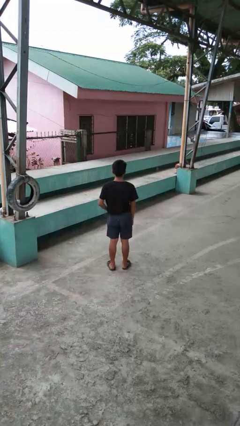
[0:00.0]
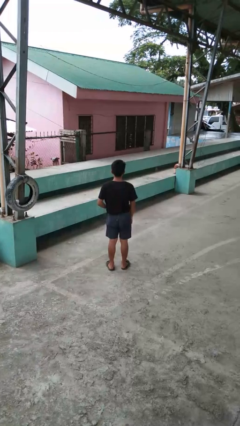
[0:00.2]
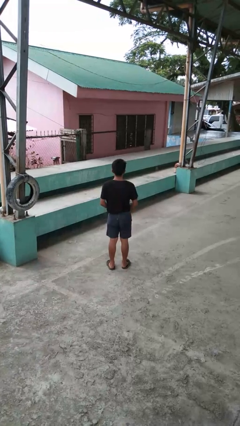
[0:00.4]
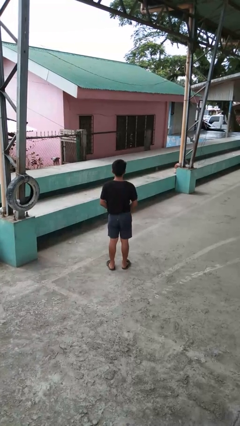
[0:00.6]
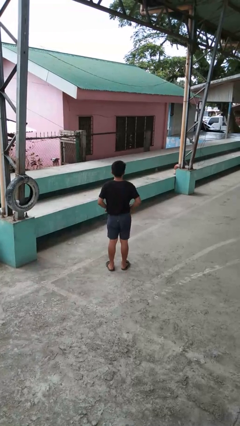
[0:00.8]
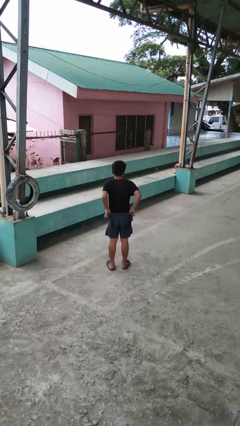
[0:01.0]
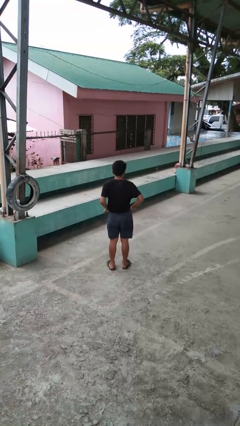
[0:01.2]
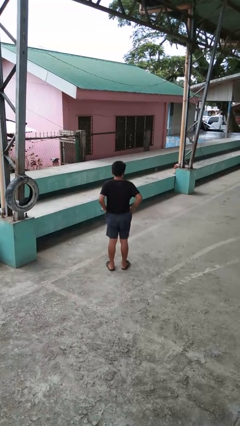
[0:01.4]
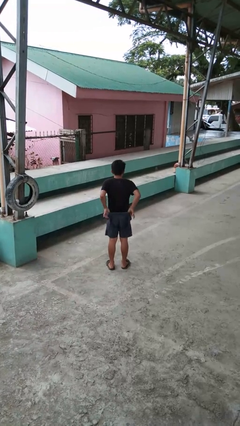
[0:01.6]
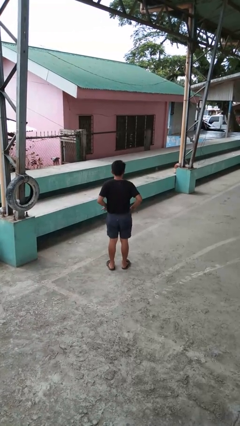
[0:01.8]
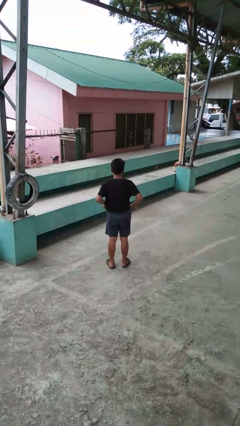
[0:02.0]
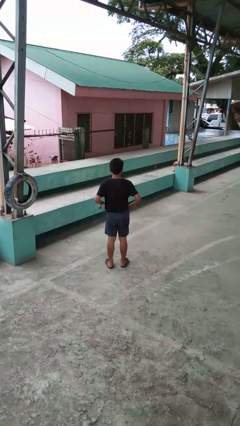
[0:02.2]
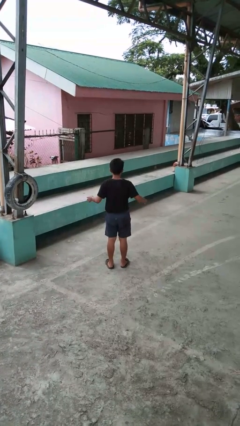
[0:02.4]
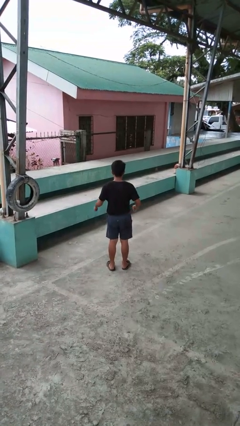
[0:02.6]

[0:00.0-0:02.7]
person hikes up pants

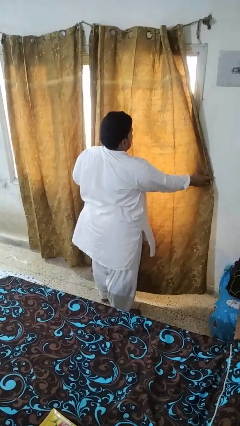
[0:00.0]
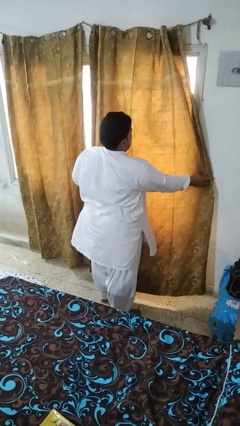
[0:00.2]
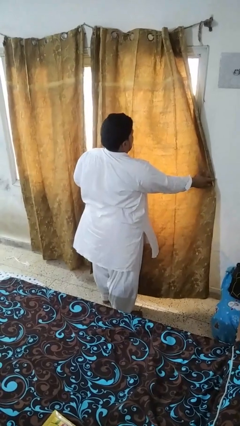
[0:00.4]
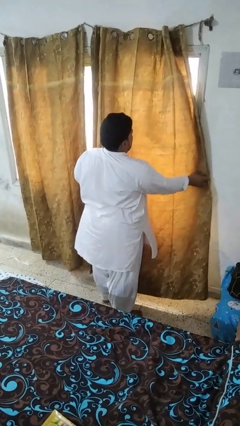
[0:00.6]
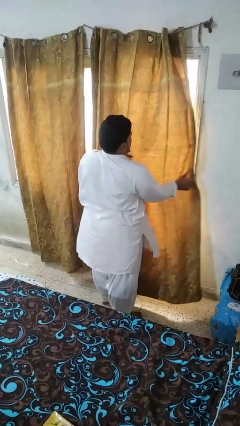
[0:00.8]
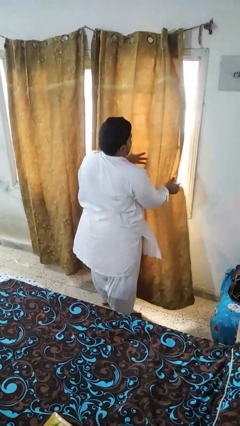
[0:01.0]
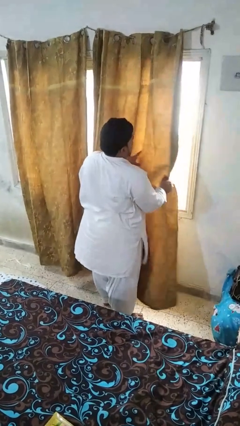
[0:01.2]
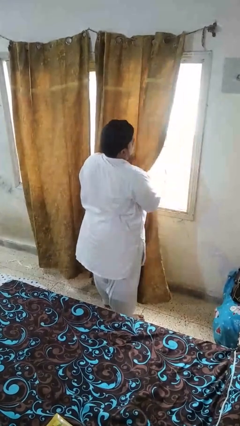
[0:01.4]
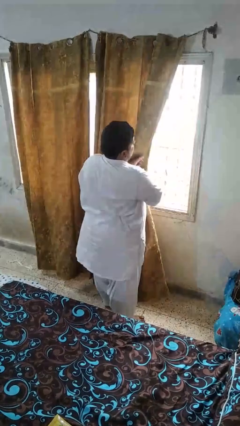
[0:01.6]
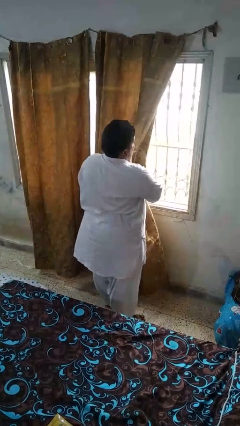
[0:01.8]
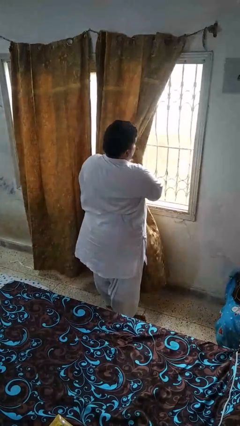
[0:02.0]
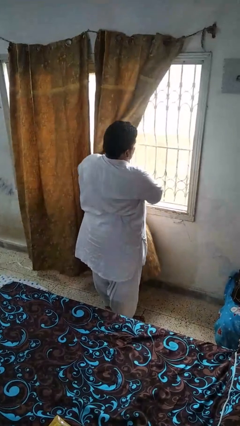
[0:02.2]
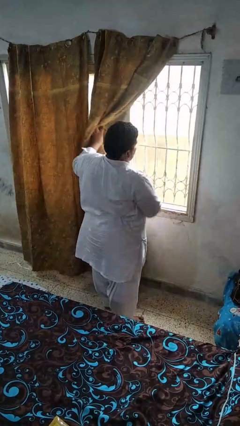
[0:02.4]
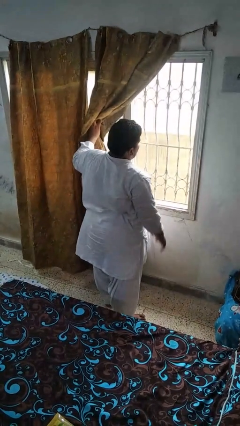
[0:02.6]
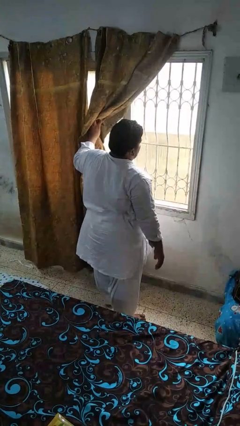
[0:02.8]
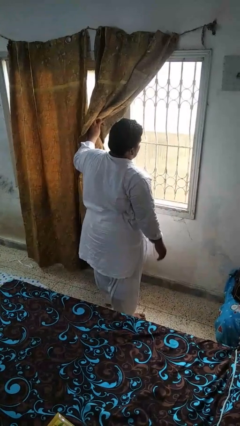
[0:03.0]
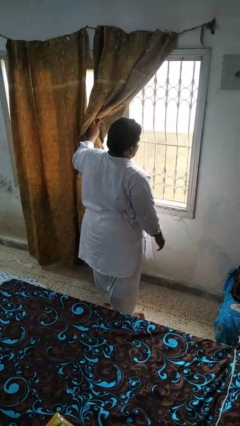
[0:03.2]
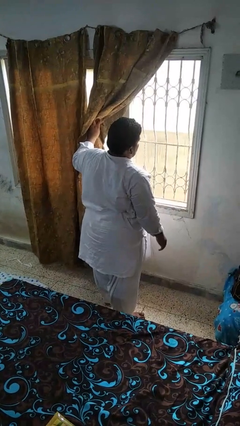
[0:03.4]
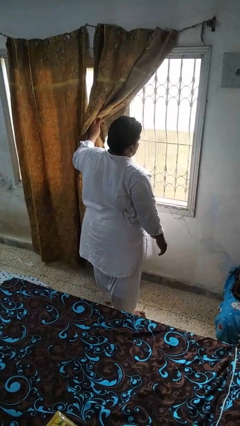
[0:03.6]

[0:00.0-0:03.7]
person opens curtains

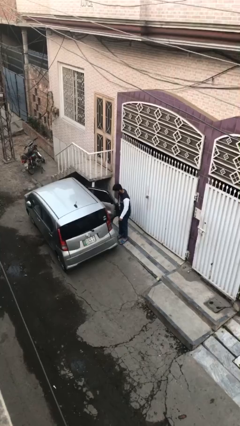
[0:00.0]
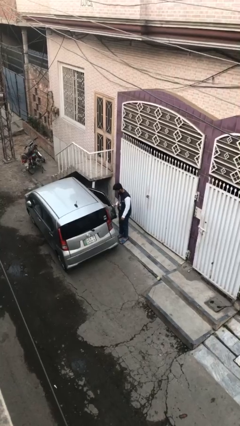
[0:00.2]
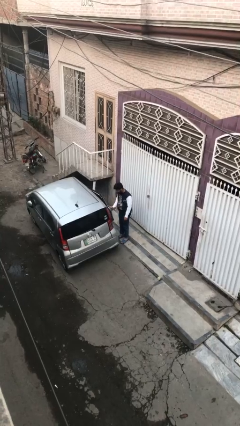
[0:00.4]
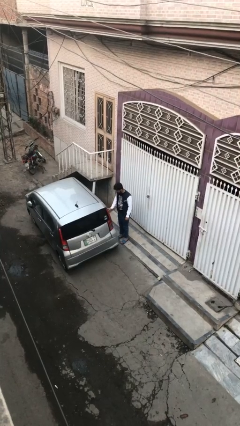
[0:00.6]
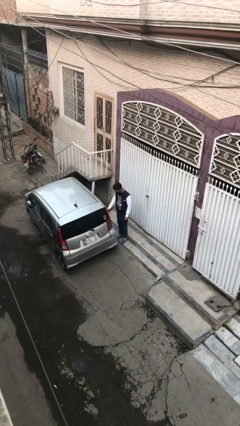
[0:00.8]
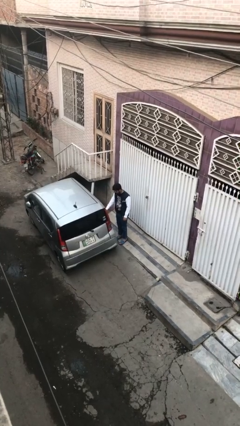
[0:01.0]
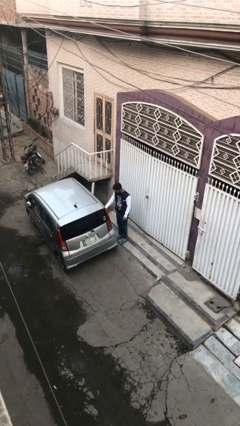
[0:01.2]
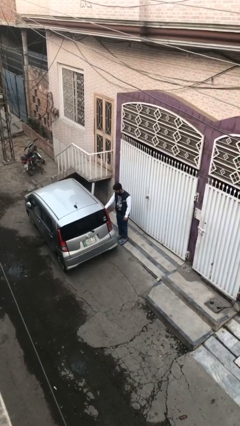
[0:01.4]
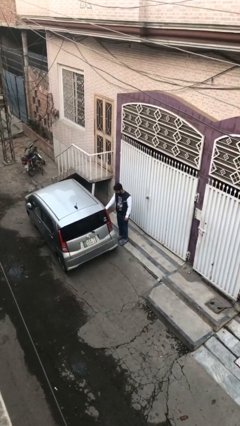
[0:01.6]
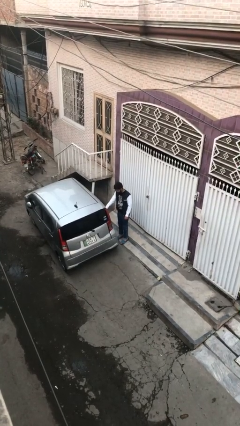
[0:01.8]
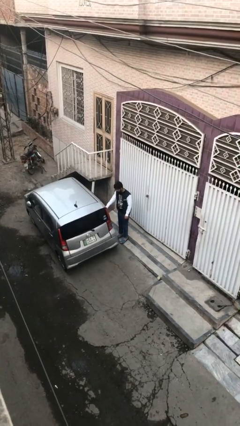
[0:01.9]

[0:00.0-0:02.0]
person closes car door

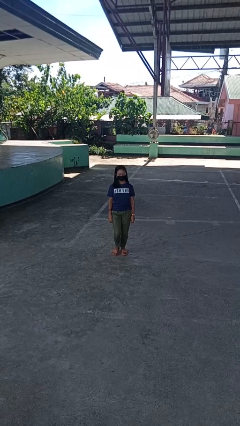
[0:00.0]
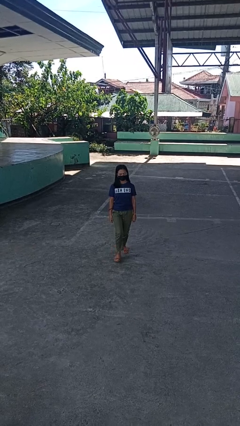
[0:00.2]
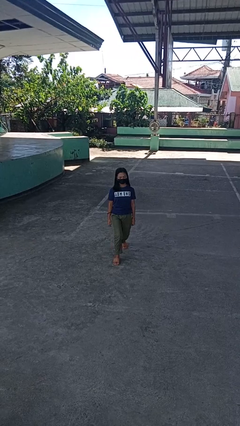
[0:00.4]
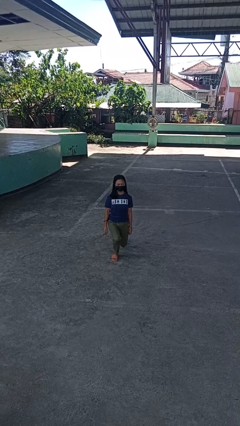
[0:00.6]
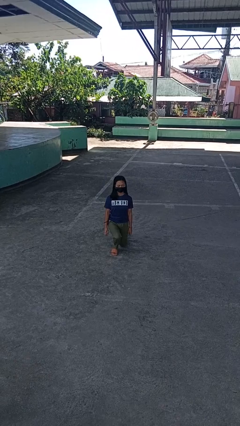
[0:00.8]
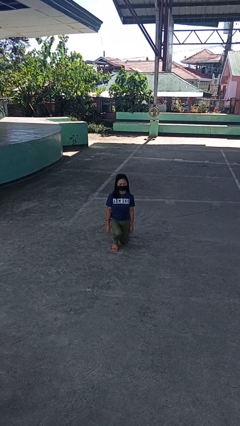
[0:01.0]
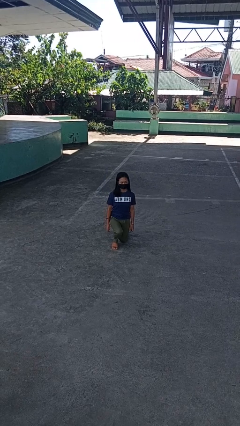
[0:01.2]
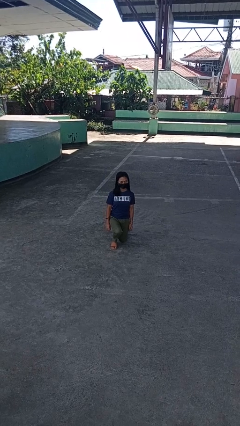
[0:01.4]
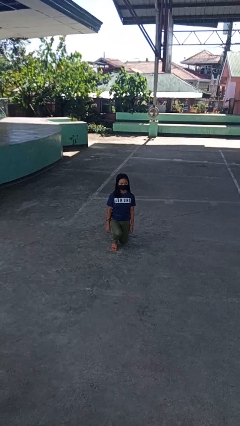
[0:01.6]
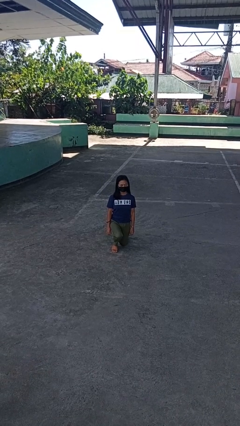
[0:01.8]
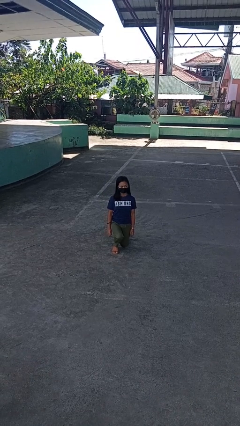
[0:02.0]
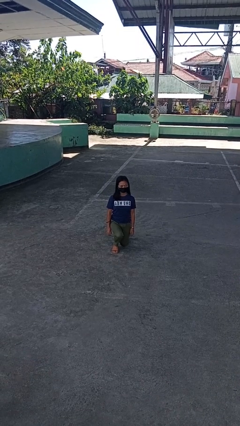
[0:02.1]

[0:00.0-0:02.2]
person kneels

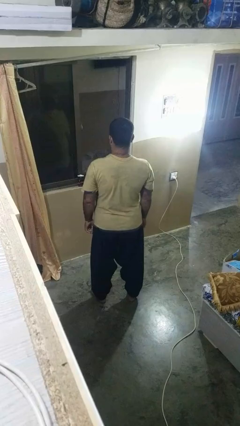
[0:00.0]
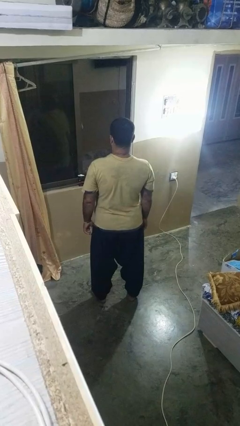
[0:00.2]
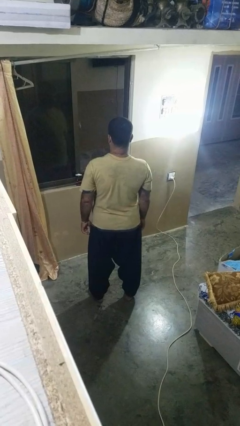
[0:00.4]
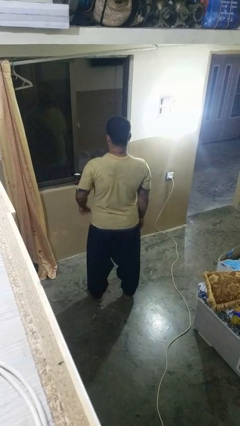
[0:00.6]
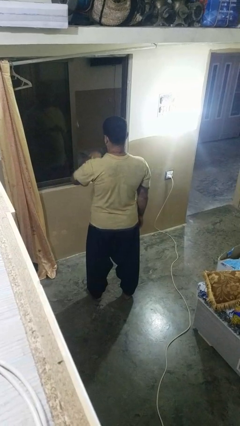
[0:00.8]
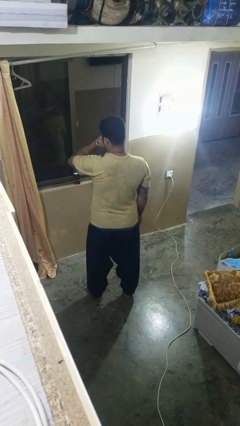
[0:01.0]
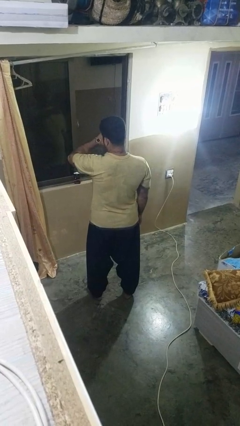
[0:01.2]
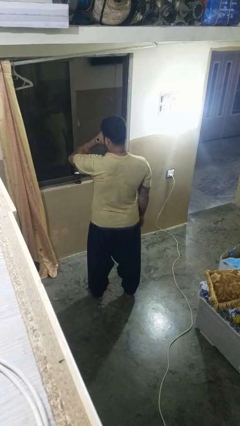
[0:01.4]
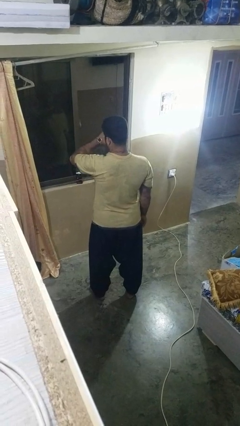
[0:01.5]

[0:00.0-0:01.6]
person looks at wristwatch

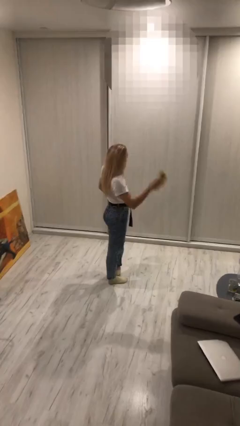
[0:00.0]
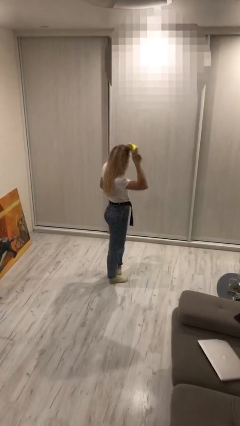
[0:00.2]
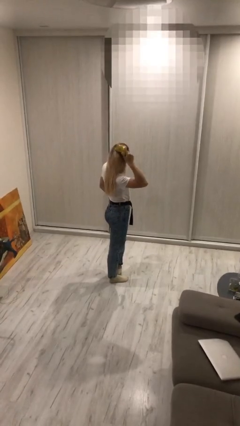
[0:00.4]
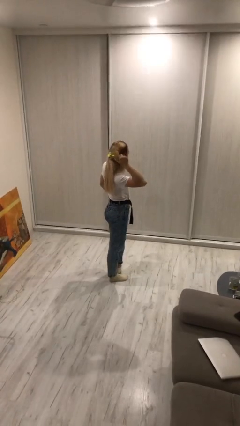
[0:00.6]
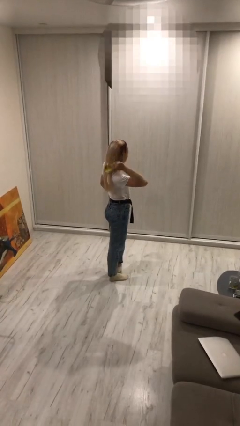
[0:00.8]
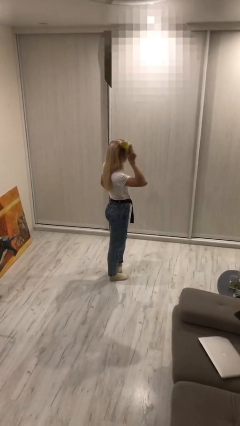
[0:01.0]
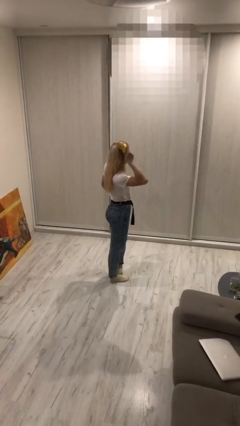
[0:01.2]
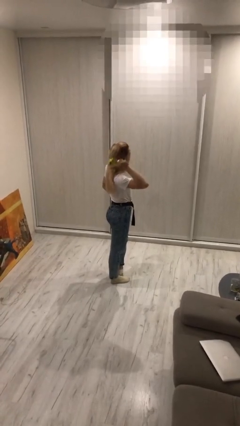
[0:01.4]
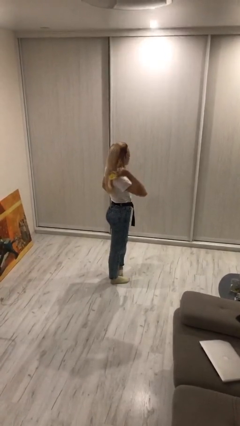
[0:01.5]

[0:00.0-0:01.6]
person brushes hair

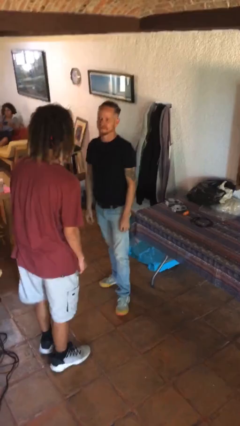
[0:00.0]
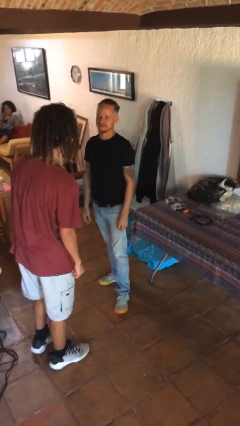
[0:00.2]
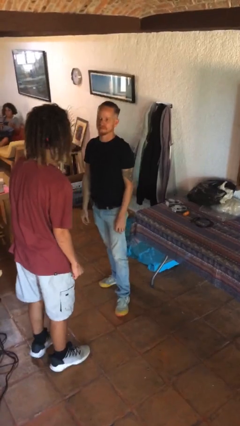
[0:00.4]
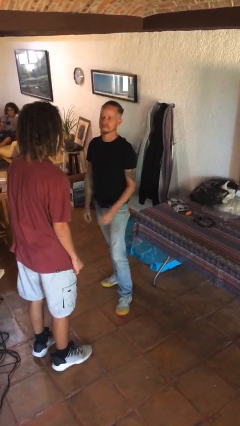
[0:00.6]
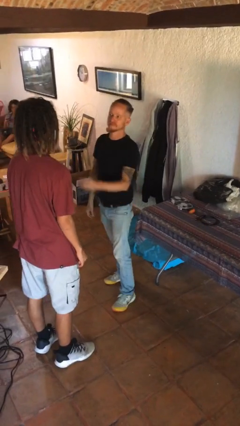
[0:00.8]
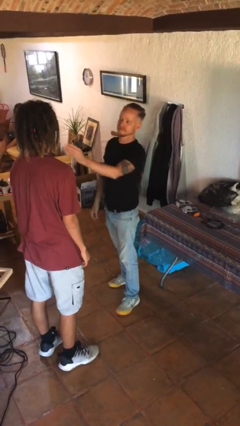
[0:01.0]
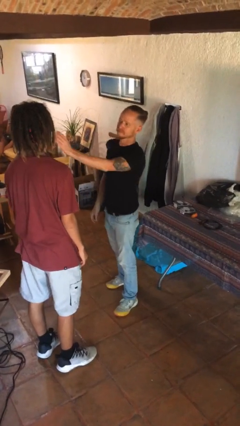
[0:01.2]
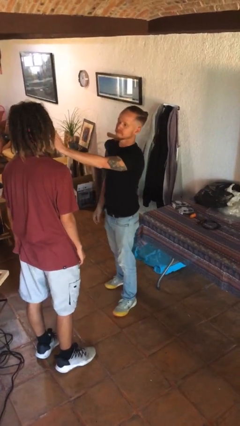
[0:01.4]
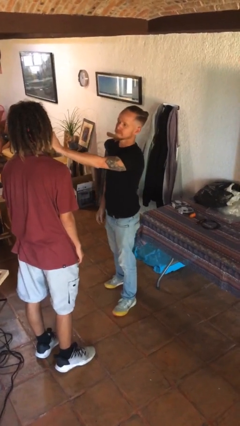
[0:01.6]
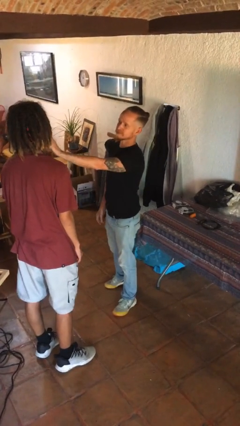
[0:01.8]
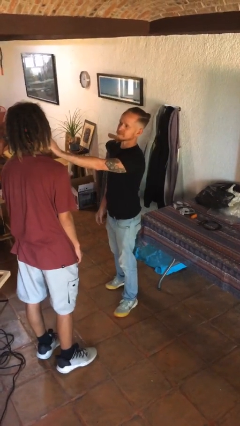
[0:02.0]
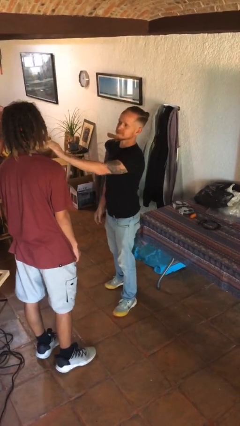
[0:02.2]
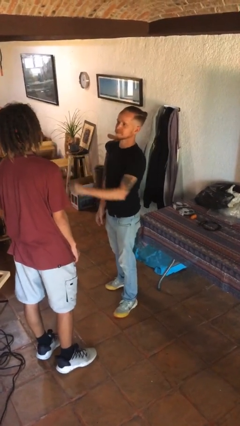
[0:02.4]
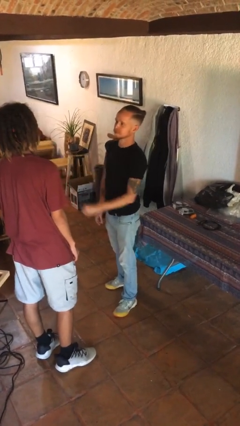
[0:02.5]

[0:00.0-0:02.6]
person touches face of person

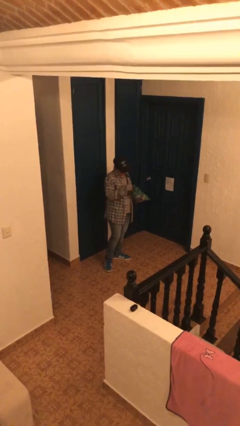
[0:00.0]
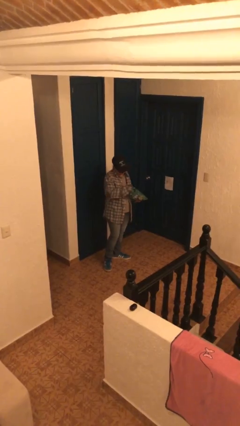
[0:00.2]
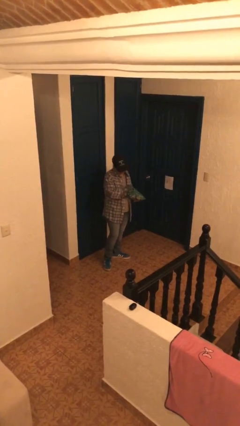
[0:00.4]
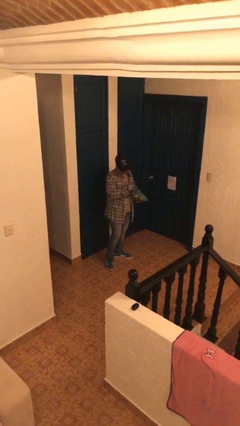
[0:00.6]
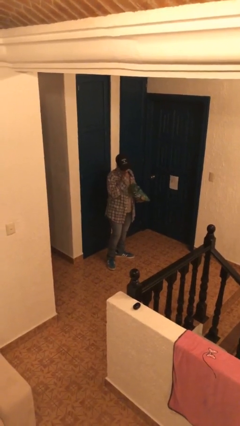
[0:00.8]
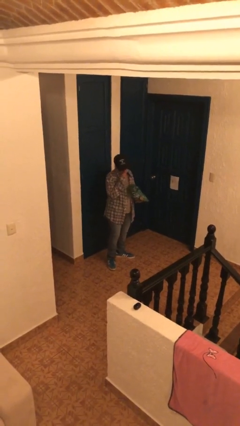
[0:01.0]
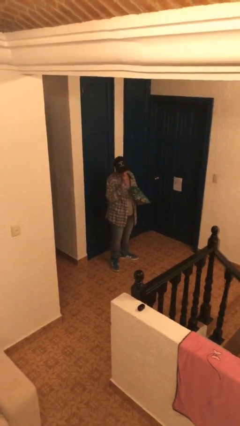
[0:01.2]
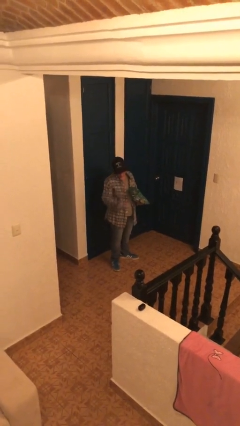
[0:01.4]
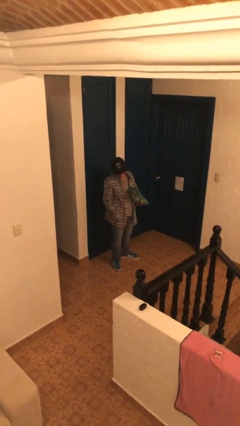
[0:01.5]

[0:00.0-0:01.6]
person eats snack from bag
